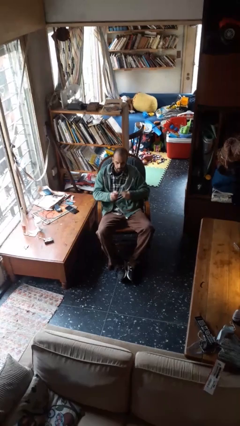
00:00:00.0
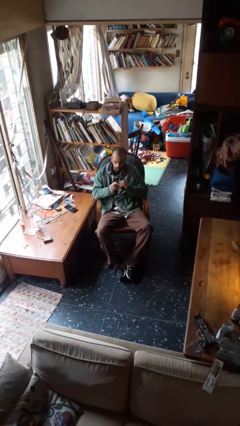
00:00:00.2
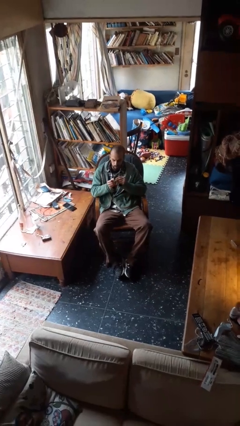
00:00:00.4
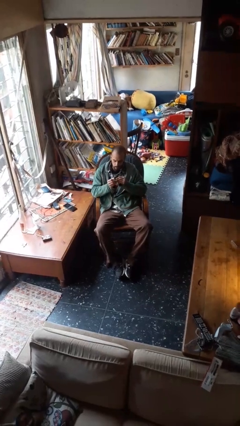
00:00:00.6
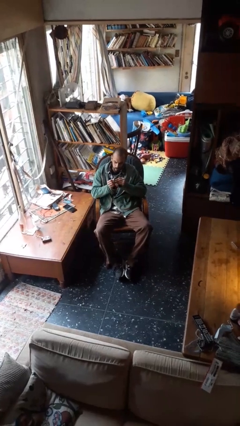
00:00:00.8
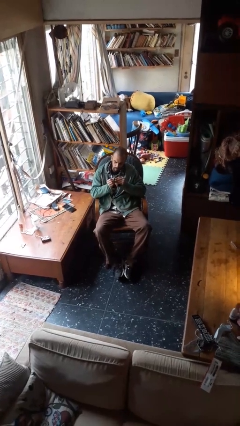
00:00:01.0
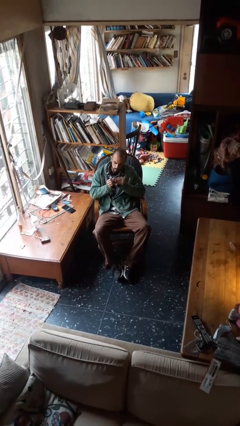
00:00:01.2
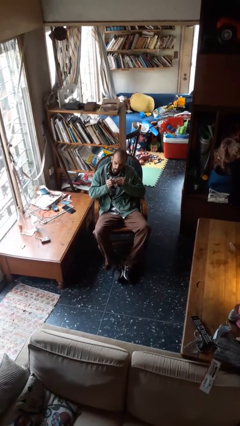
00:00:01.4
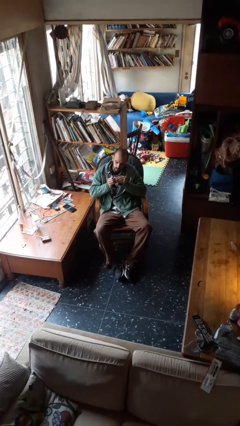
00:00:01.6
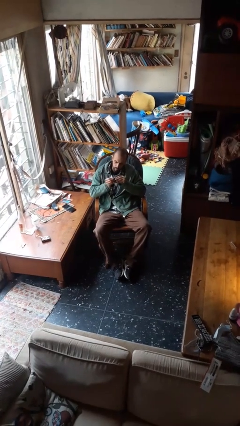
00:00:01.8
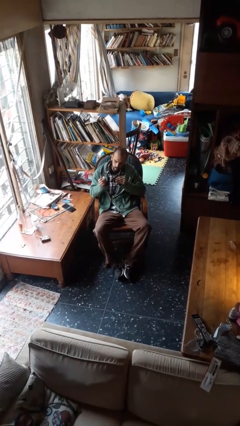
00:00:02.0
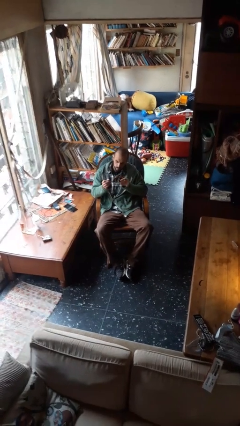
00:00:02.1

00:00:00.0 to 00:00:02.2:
person files fingernails

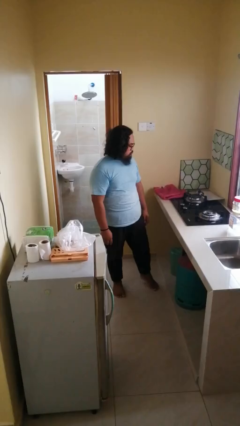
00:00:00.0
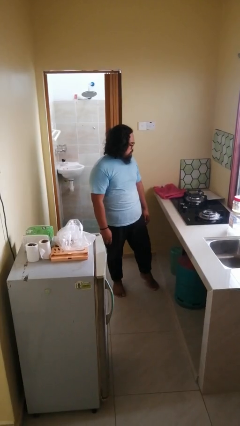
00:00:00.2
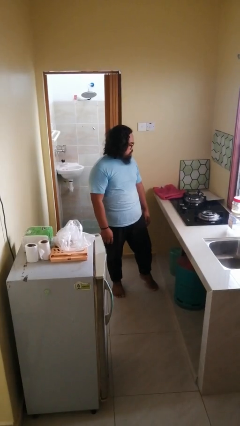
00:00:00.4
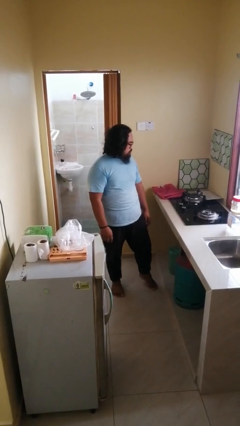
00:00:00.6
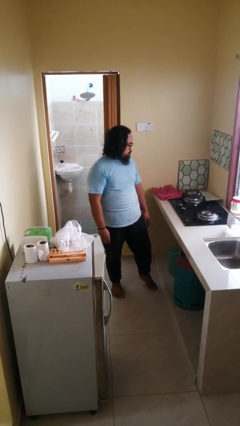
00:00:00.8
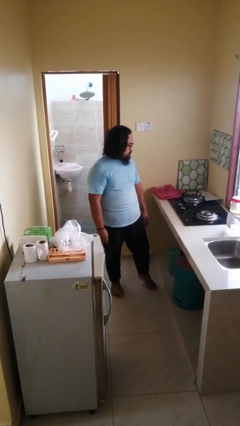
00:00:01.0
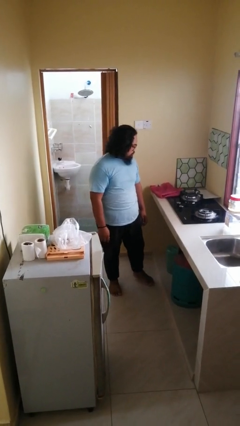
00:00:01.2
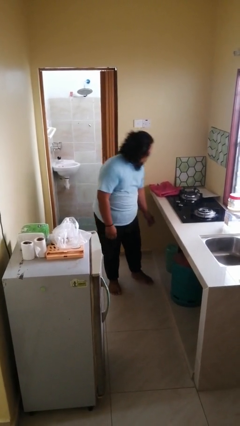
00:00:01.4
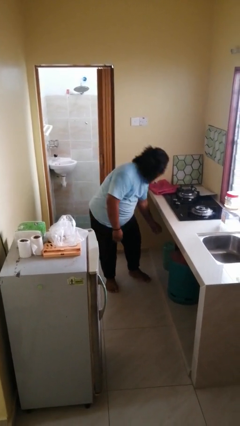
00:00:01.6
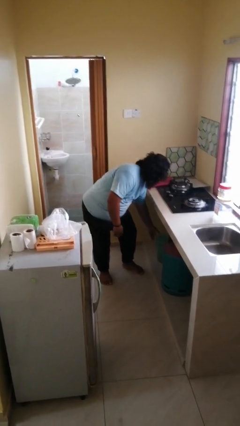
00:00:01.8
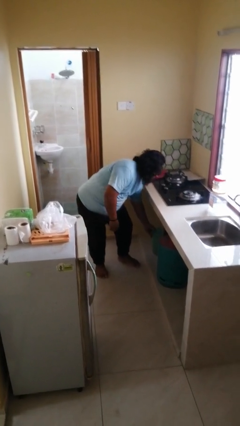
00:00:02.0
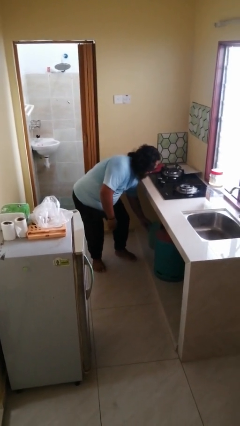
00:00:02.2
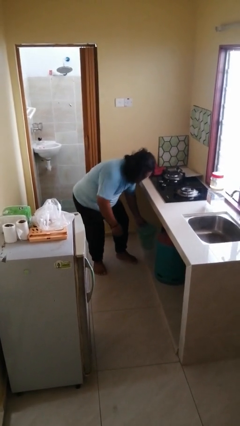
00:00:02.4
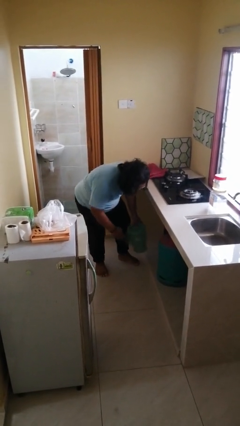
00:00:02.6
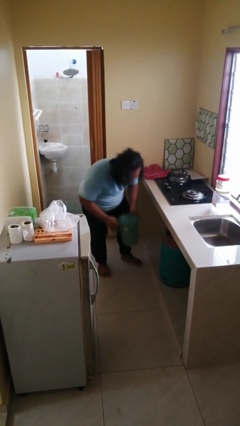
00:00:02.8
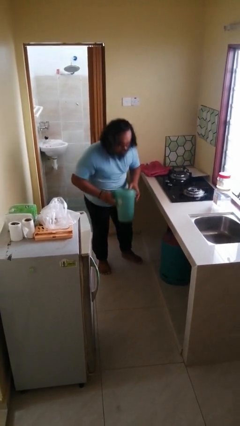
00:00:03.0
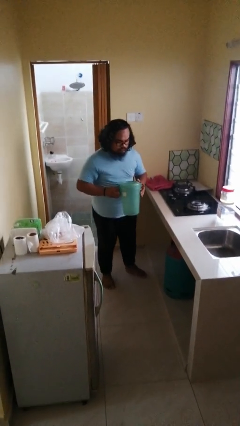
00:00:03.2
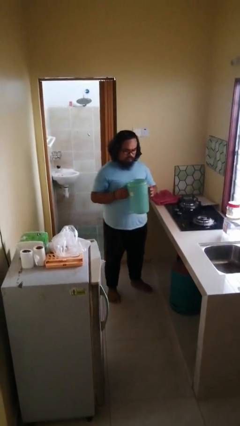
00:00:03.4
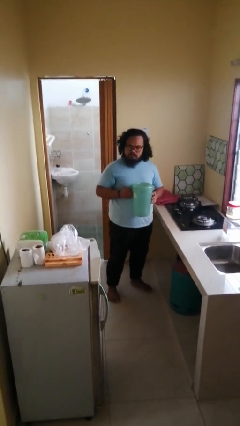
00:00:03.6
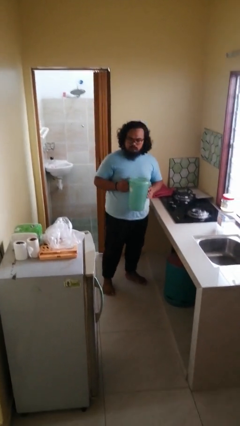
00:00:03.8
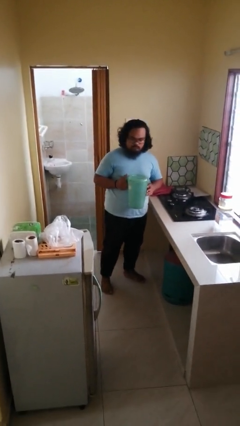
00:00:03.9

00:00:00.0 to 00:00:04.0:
person picks up object from cabinet

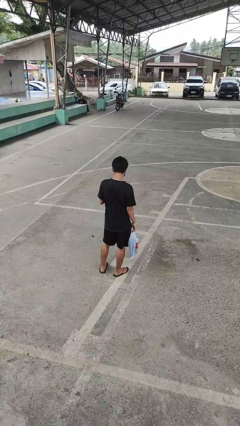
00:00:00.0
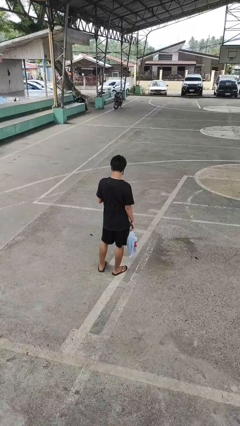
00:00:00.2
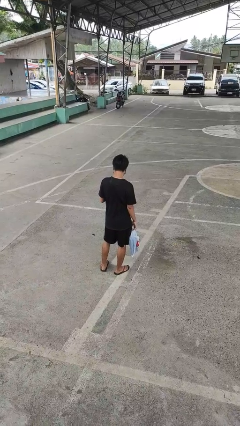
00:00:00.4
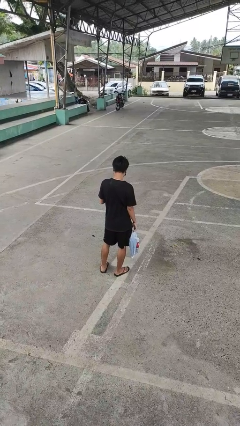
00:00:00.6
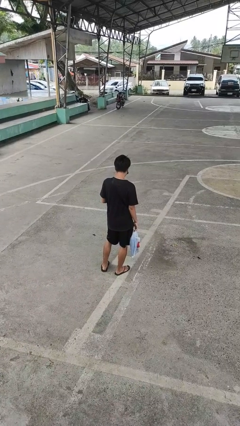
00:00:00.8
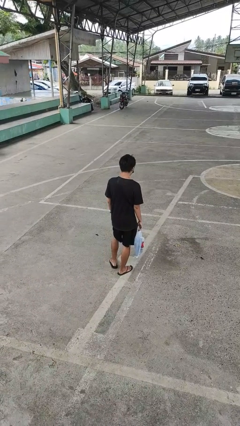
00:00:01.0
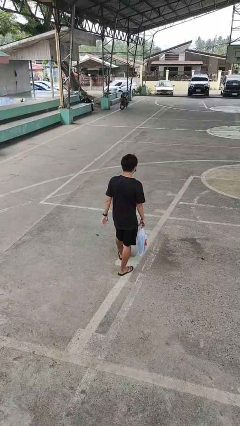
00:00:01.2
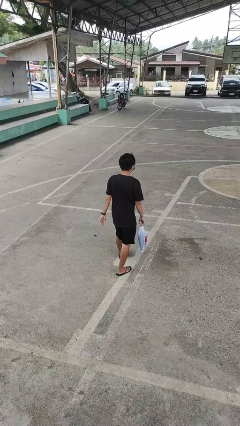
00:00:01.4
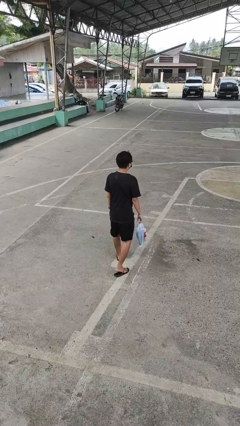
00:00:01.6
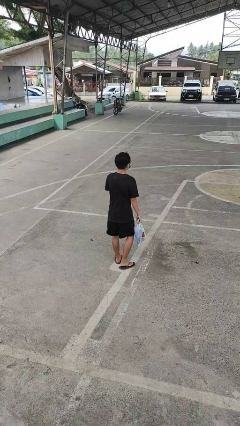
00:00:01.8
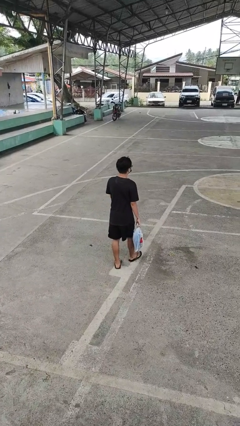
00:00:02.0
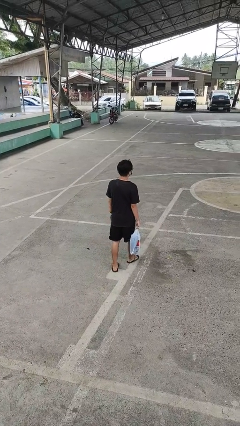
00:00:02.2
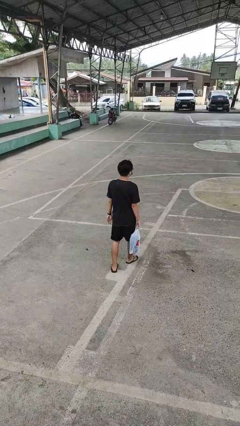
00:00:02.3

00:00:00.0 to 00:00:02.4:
person carries groceries

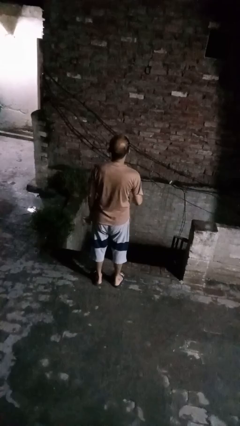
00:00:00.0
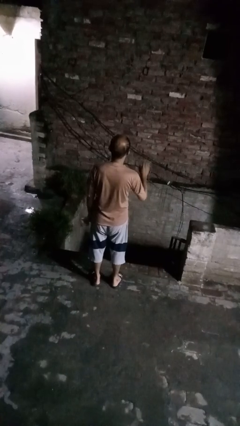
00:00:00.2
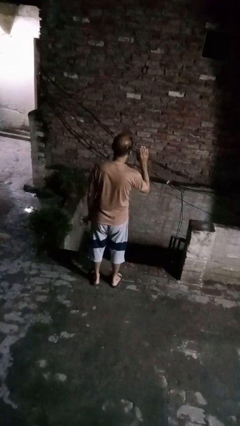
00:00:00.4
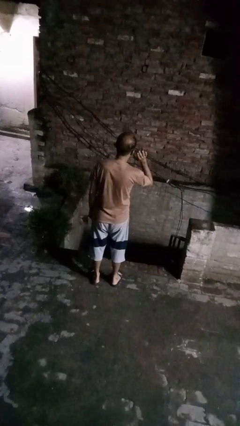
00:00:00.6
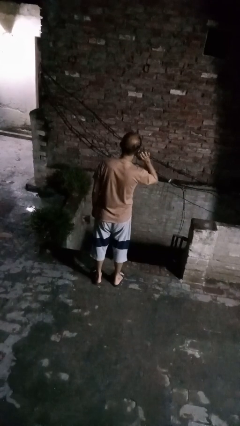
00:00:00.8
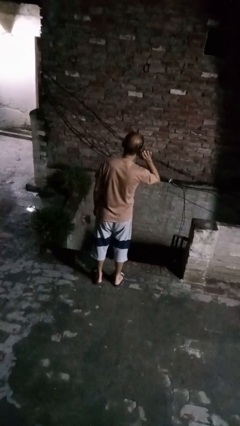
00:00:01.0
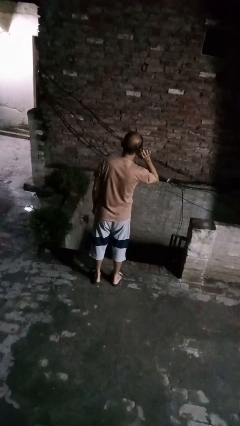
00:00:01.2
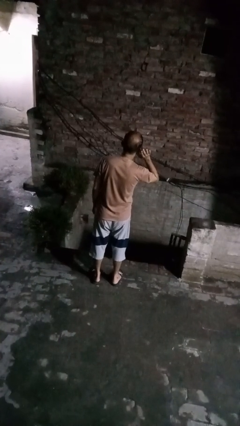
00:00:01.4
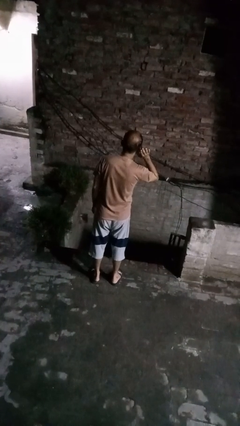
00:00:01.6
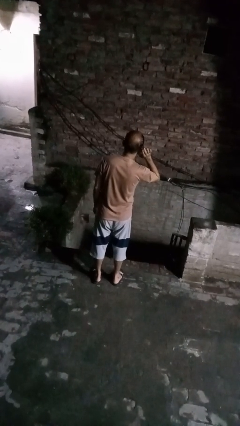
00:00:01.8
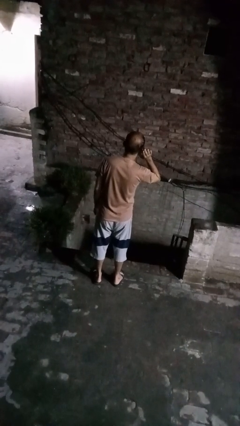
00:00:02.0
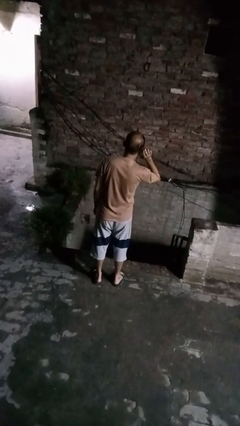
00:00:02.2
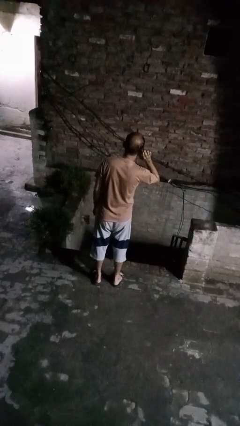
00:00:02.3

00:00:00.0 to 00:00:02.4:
person gestures listen closely

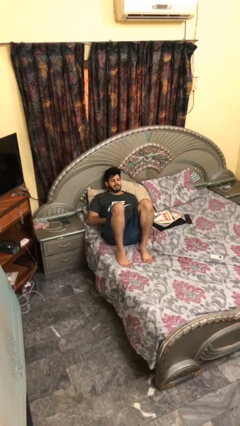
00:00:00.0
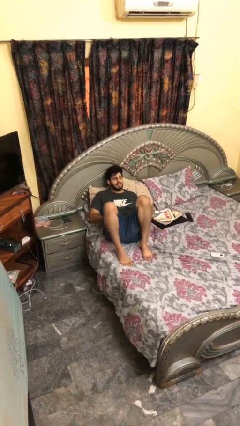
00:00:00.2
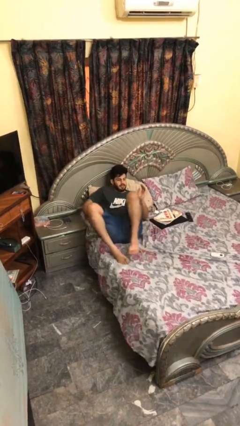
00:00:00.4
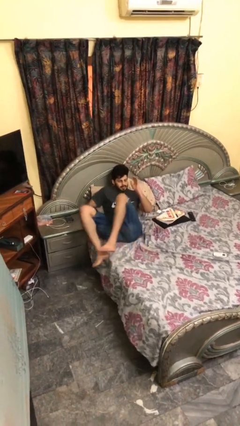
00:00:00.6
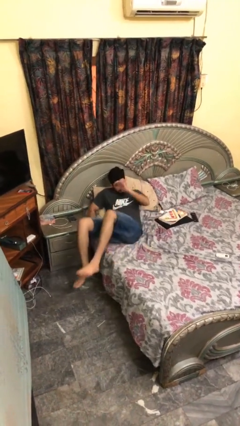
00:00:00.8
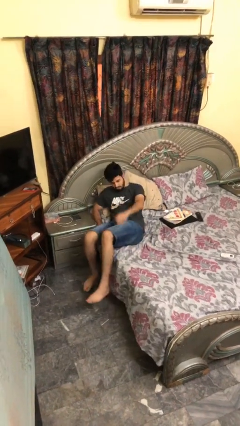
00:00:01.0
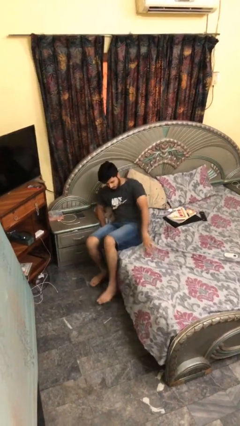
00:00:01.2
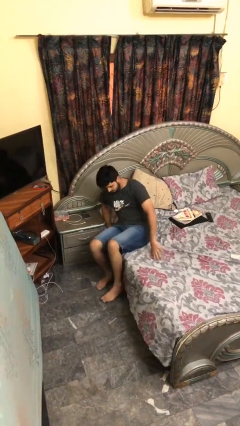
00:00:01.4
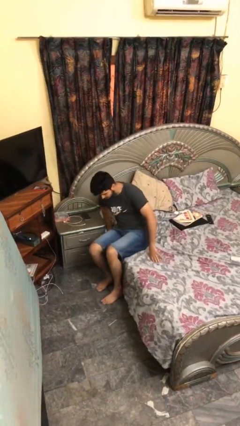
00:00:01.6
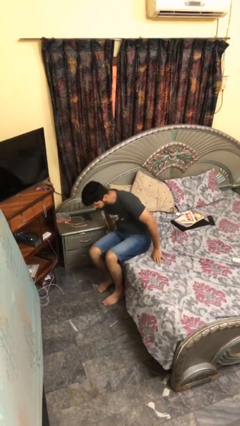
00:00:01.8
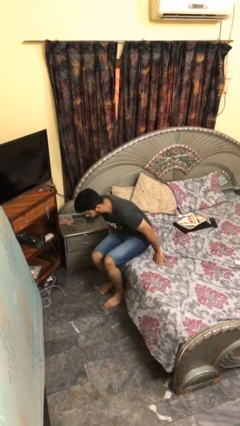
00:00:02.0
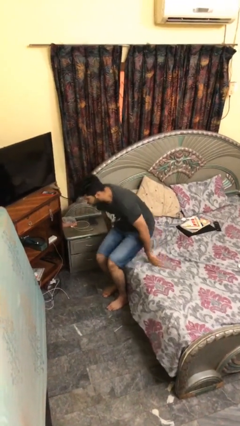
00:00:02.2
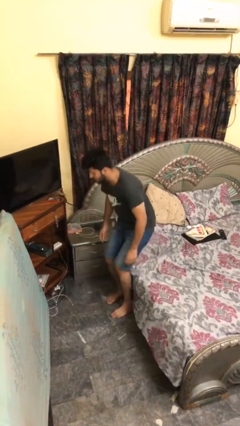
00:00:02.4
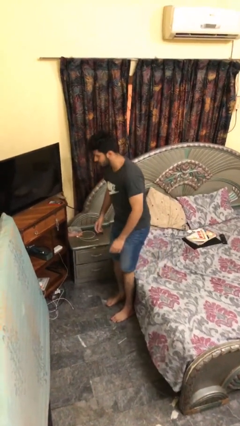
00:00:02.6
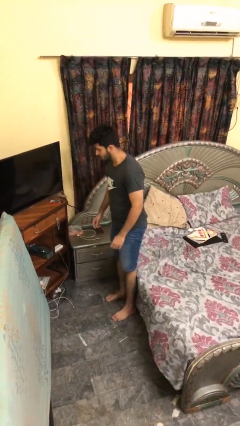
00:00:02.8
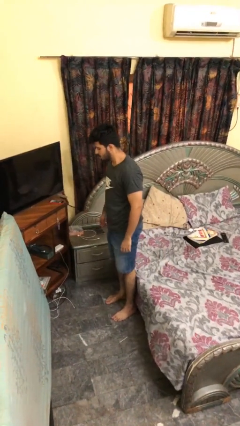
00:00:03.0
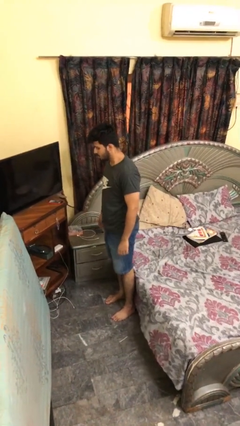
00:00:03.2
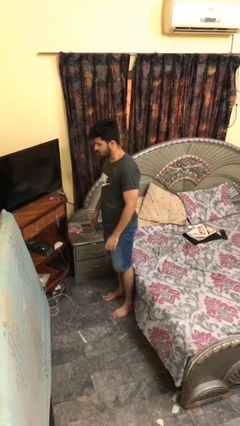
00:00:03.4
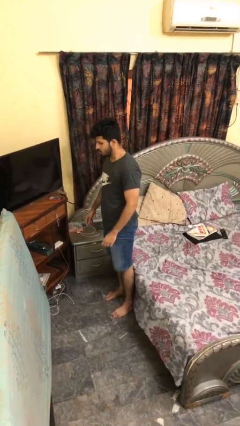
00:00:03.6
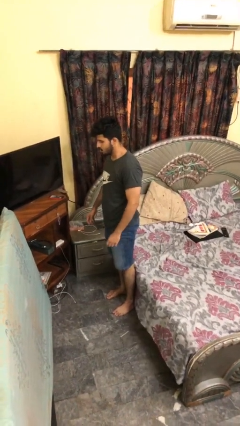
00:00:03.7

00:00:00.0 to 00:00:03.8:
person stands up

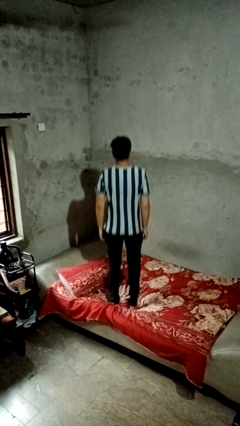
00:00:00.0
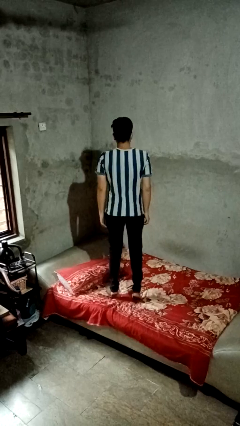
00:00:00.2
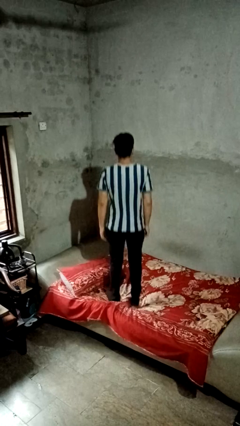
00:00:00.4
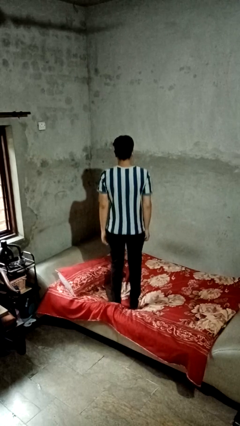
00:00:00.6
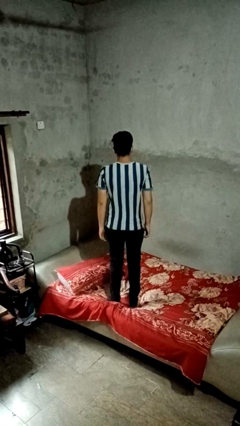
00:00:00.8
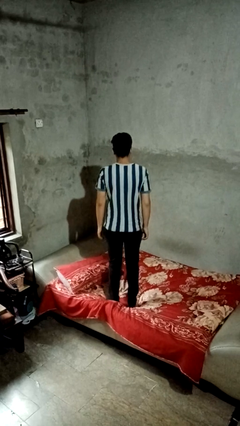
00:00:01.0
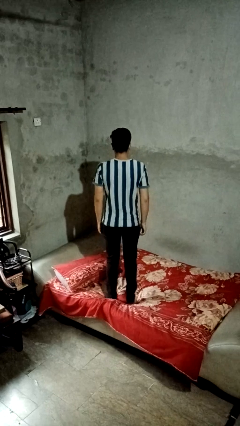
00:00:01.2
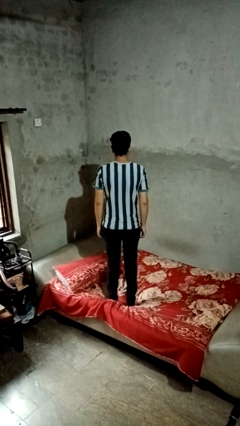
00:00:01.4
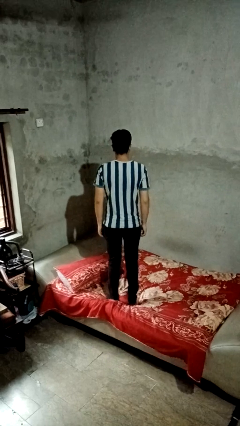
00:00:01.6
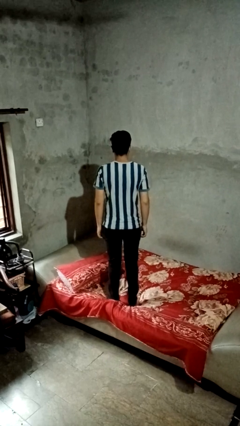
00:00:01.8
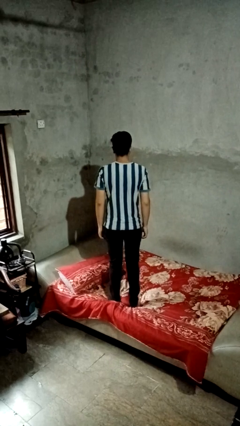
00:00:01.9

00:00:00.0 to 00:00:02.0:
person jumps on bed

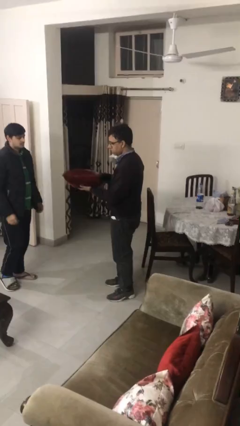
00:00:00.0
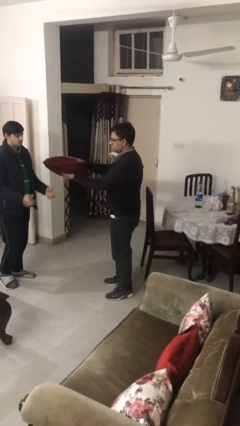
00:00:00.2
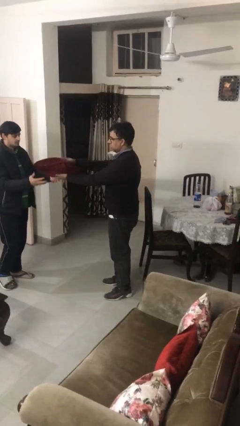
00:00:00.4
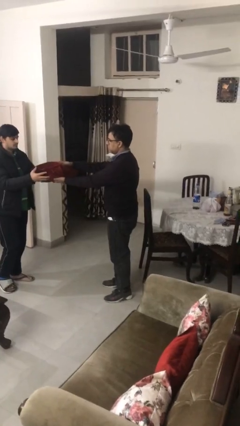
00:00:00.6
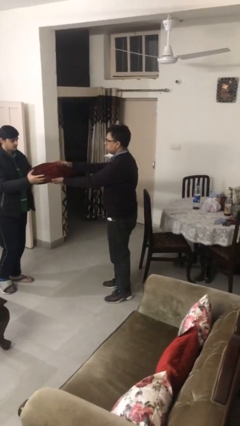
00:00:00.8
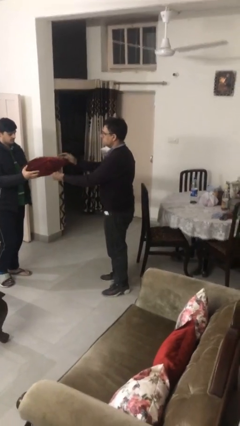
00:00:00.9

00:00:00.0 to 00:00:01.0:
person transfers object to person
